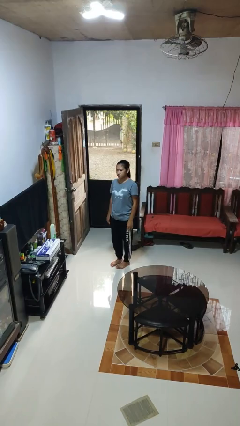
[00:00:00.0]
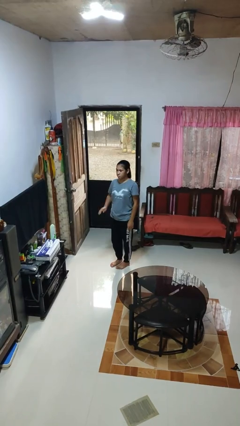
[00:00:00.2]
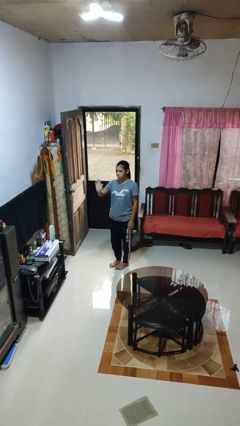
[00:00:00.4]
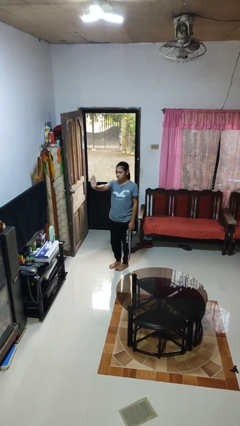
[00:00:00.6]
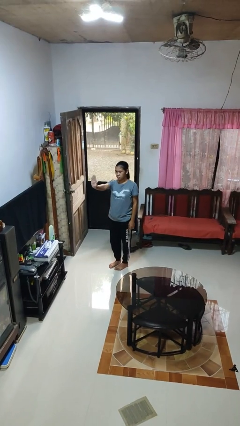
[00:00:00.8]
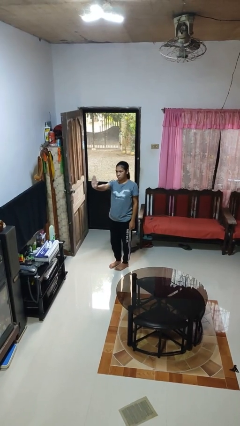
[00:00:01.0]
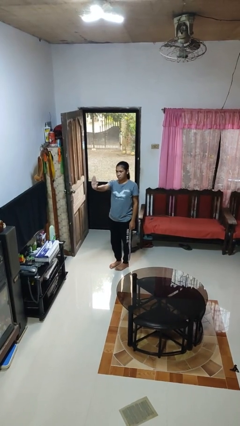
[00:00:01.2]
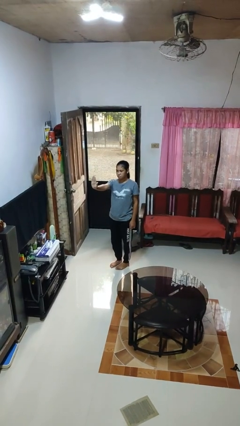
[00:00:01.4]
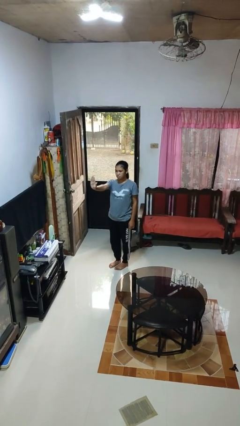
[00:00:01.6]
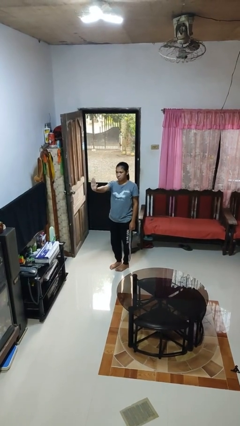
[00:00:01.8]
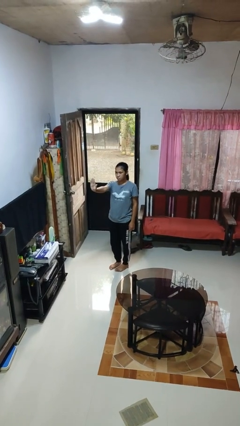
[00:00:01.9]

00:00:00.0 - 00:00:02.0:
person gestures stop

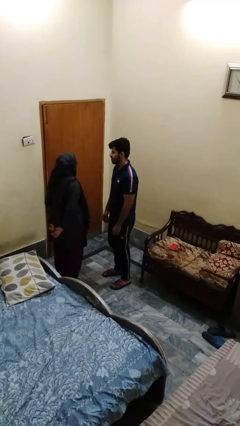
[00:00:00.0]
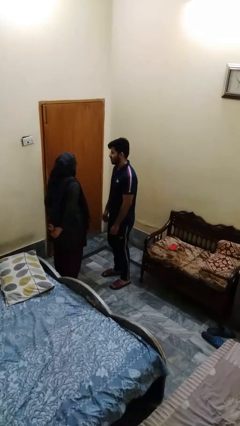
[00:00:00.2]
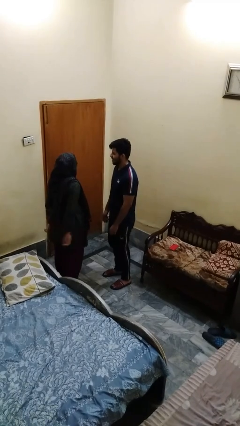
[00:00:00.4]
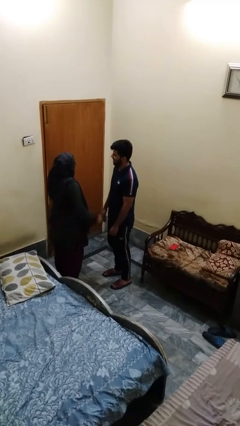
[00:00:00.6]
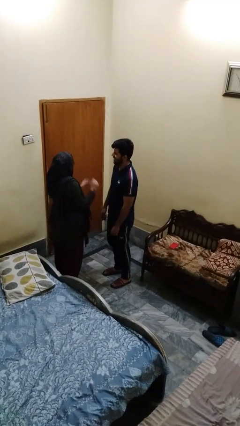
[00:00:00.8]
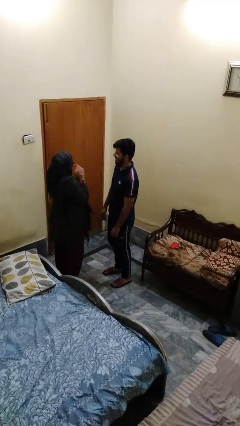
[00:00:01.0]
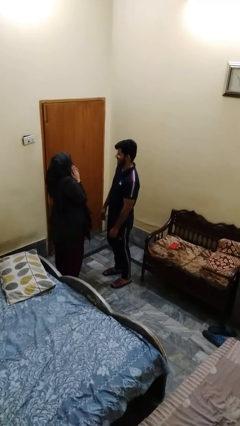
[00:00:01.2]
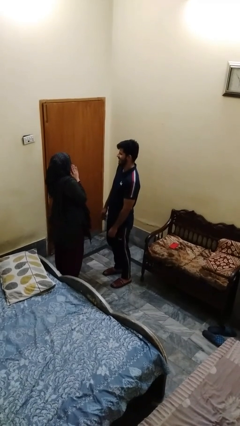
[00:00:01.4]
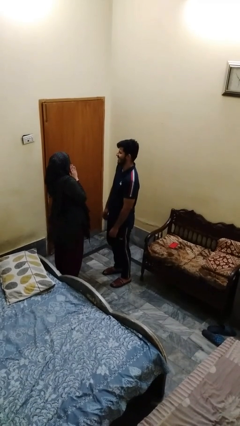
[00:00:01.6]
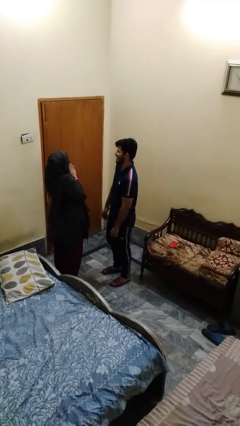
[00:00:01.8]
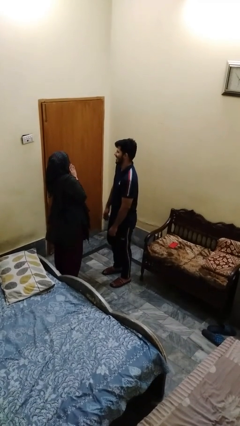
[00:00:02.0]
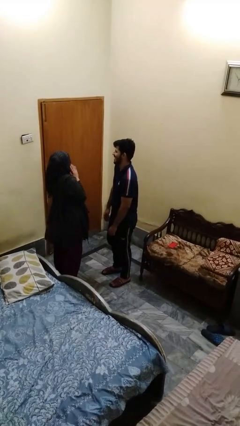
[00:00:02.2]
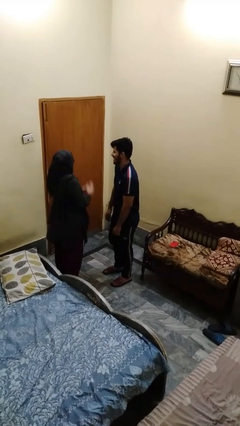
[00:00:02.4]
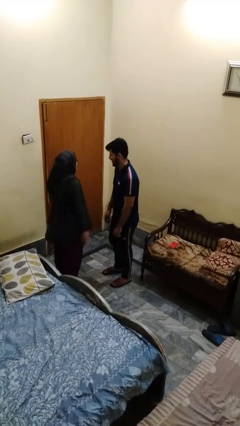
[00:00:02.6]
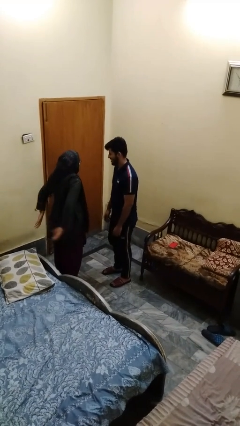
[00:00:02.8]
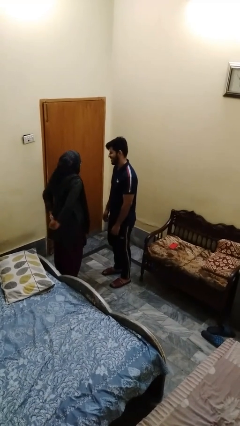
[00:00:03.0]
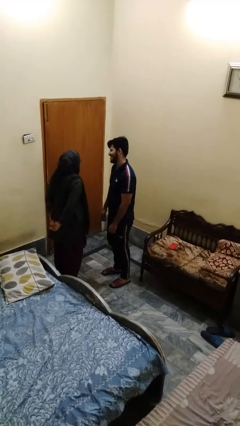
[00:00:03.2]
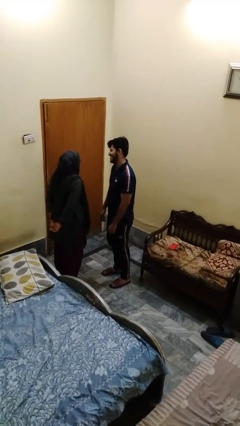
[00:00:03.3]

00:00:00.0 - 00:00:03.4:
person laughs with person

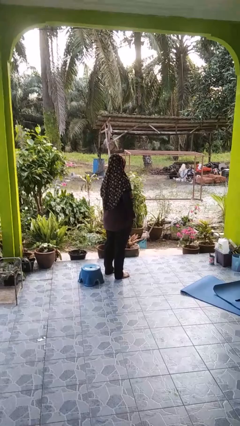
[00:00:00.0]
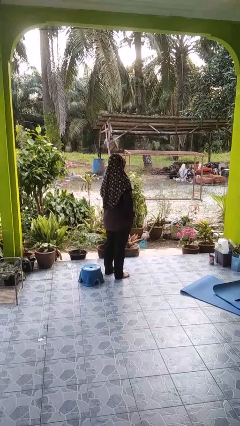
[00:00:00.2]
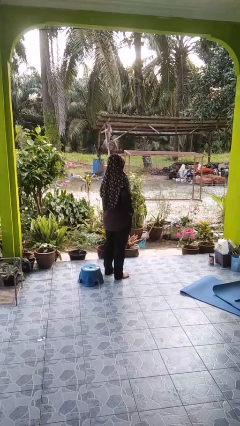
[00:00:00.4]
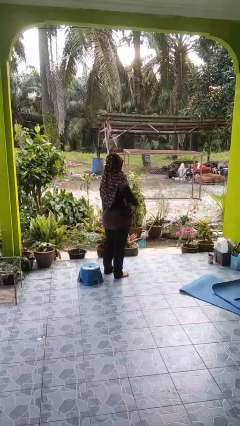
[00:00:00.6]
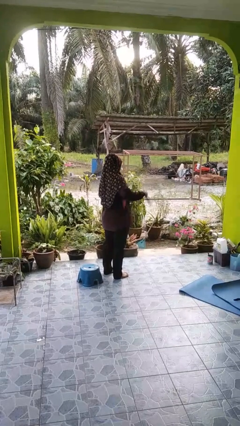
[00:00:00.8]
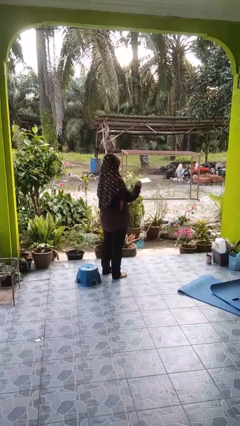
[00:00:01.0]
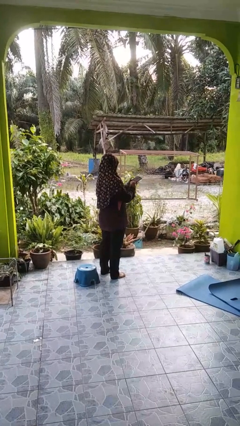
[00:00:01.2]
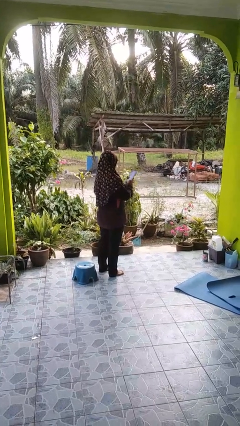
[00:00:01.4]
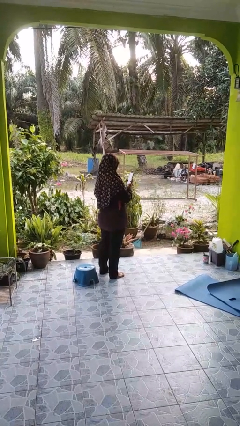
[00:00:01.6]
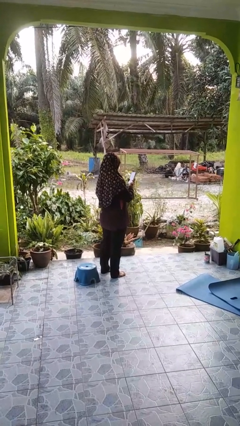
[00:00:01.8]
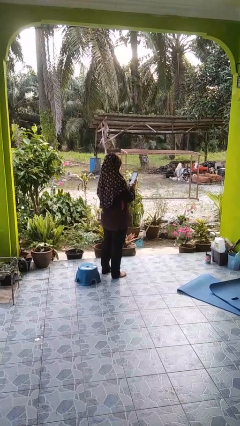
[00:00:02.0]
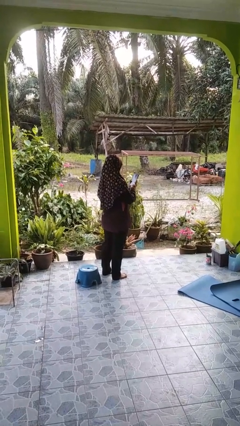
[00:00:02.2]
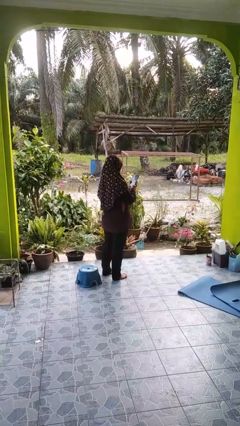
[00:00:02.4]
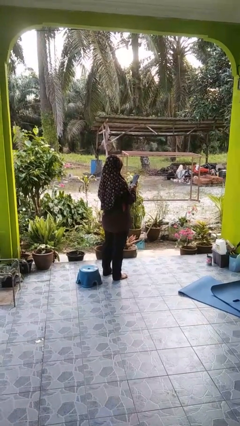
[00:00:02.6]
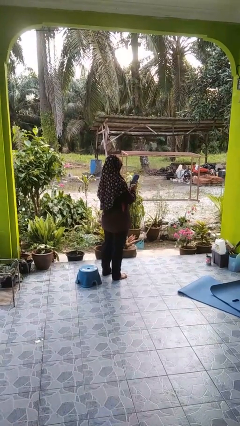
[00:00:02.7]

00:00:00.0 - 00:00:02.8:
person takes phone from pocket

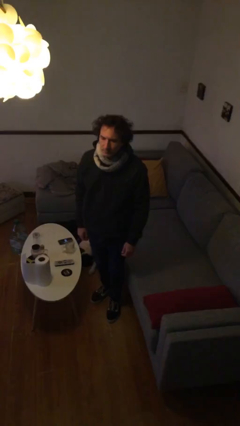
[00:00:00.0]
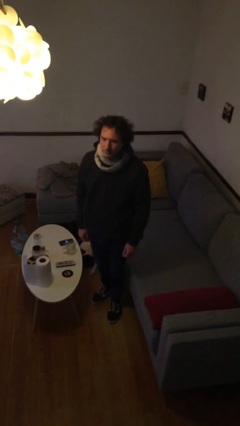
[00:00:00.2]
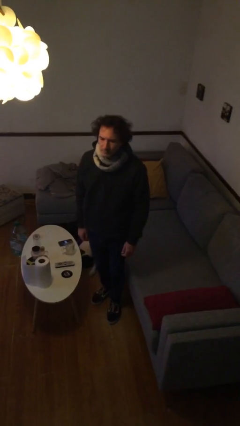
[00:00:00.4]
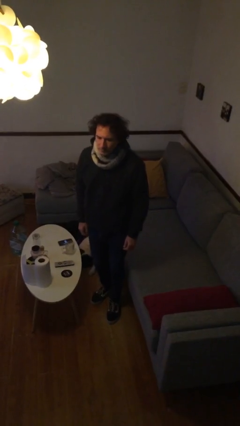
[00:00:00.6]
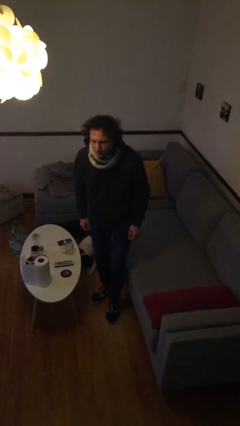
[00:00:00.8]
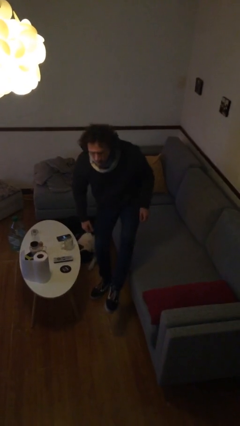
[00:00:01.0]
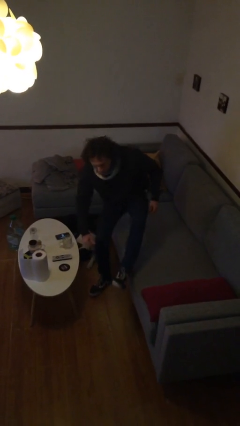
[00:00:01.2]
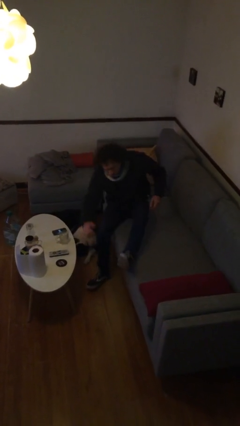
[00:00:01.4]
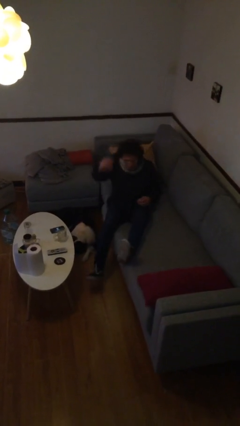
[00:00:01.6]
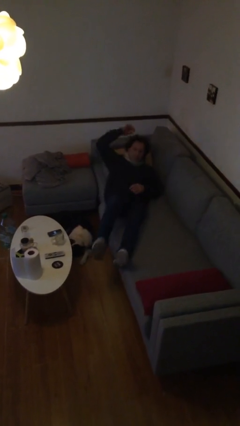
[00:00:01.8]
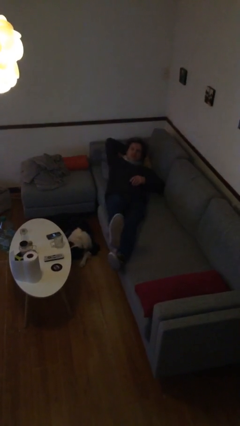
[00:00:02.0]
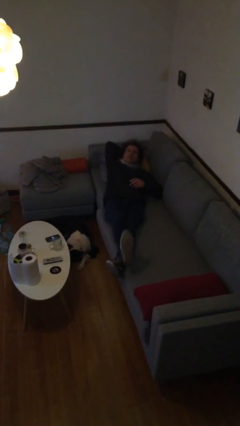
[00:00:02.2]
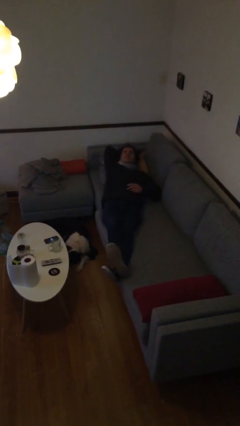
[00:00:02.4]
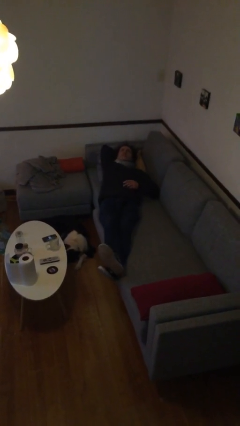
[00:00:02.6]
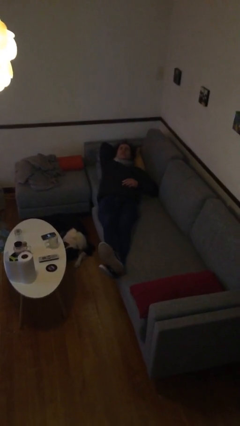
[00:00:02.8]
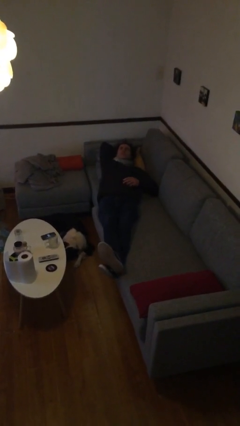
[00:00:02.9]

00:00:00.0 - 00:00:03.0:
person lies down on couch

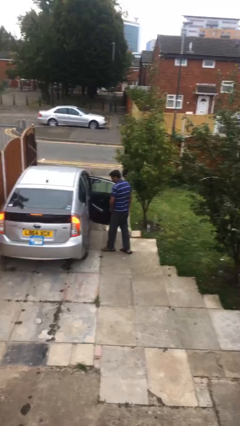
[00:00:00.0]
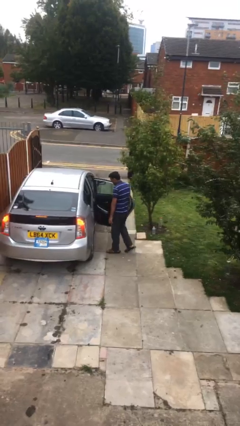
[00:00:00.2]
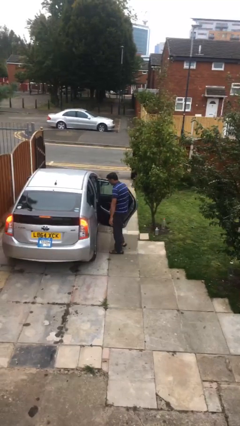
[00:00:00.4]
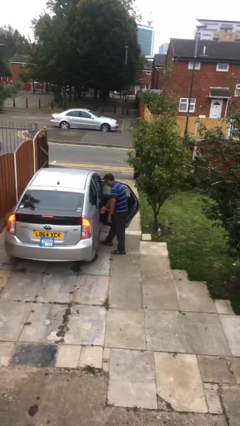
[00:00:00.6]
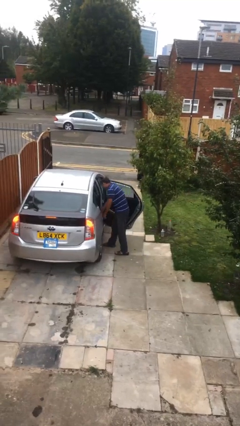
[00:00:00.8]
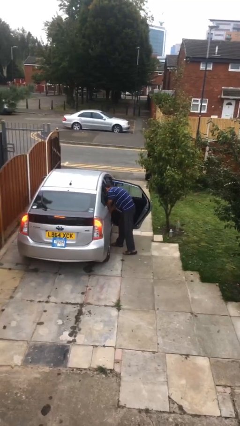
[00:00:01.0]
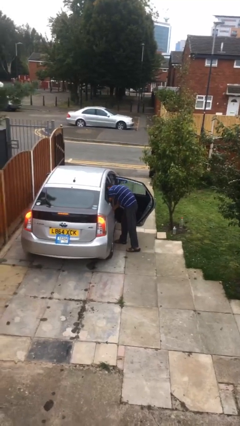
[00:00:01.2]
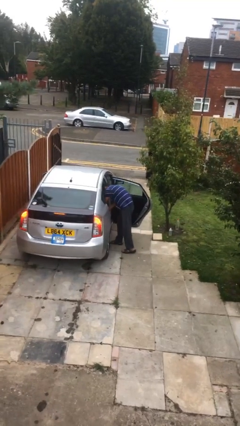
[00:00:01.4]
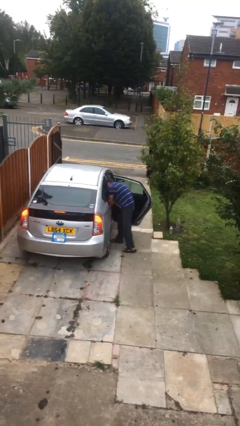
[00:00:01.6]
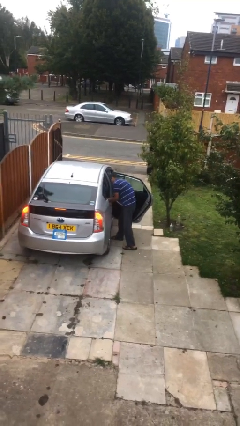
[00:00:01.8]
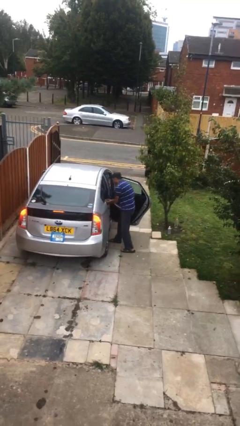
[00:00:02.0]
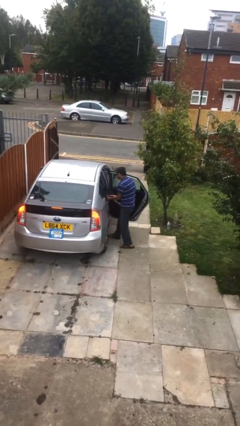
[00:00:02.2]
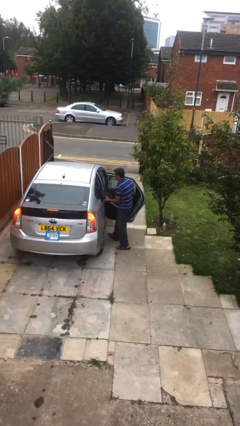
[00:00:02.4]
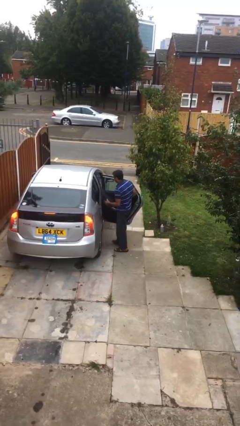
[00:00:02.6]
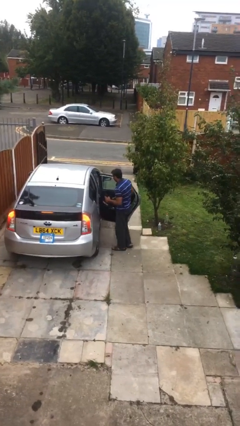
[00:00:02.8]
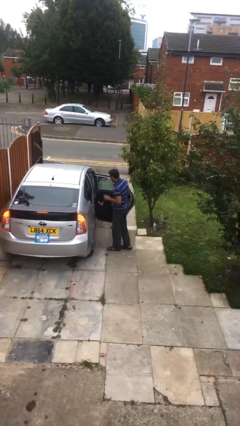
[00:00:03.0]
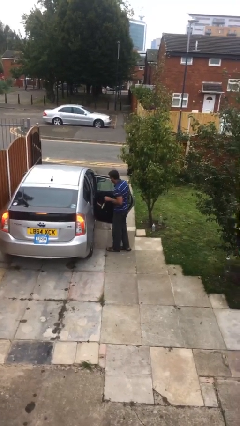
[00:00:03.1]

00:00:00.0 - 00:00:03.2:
person unloads car

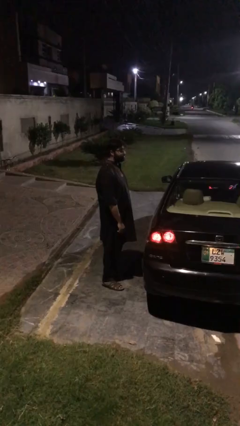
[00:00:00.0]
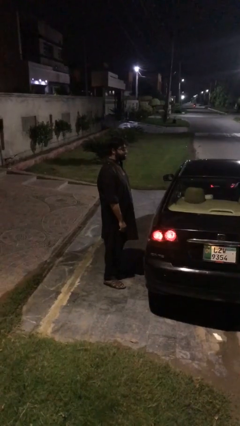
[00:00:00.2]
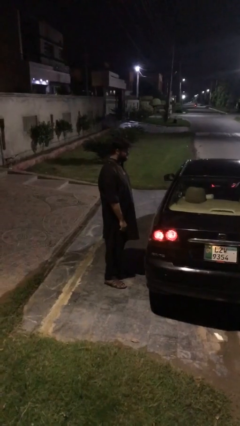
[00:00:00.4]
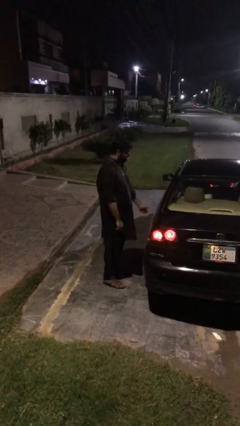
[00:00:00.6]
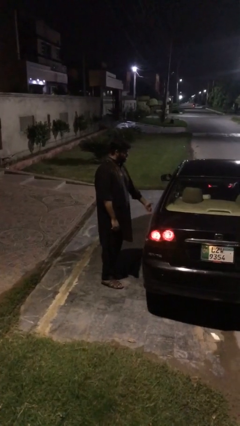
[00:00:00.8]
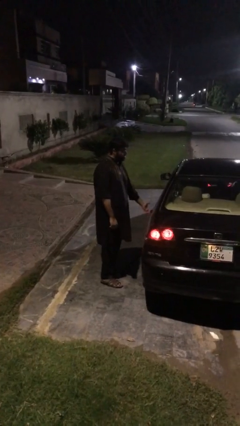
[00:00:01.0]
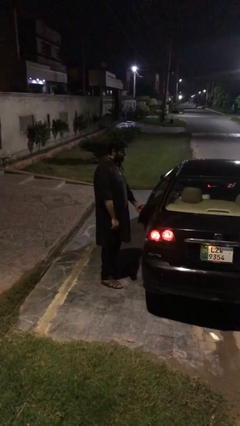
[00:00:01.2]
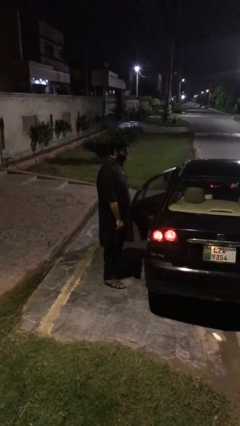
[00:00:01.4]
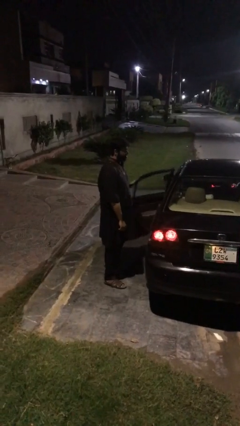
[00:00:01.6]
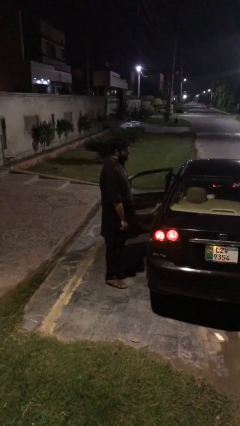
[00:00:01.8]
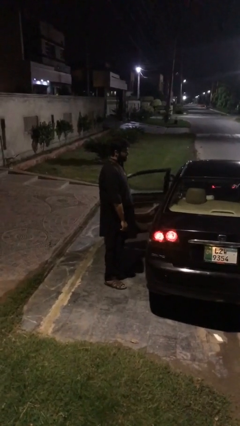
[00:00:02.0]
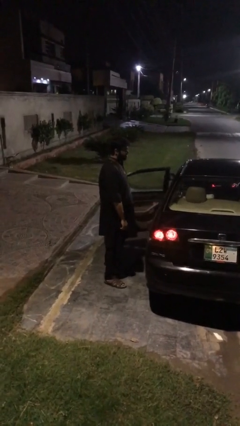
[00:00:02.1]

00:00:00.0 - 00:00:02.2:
person opens car door

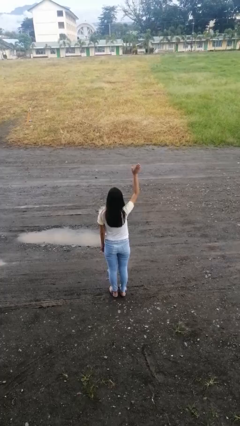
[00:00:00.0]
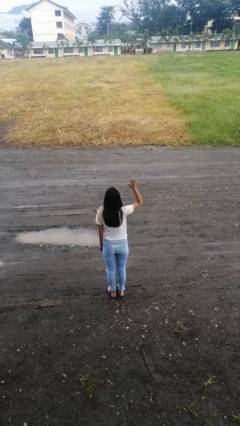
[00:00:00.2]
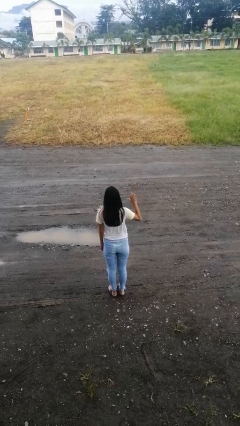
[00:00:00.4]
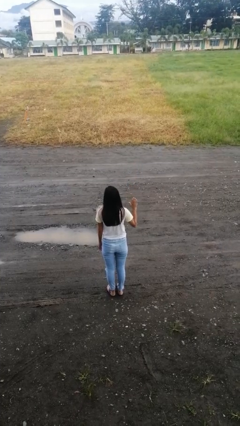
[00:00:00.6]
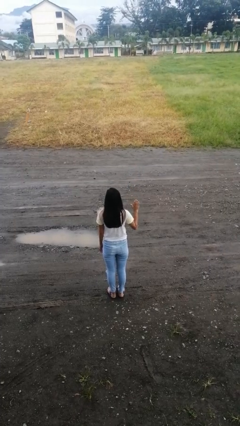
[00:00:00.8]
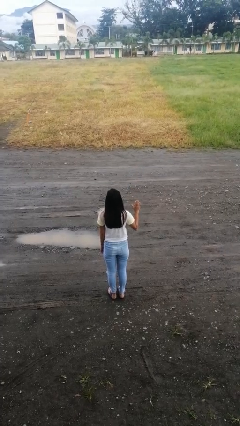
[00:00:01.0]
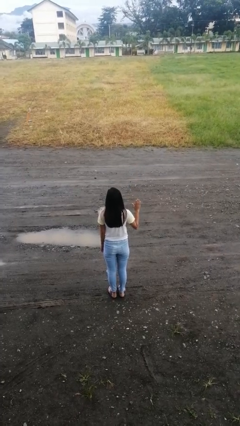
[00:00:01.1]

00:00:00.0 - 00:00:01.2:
person gestures lower hand
